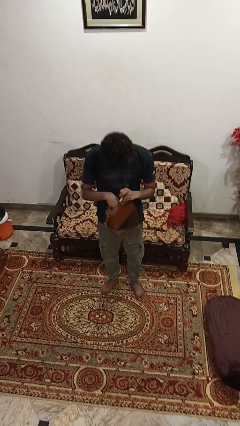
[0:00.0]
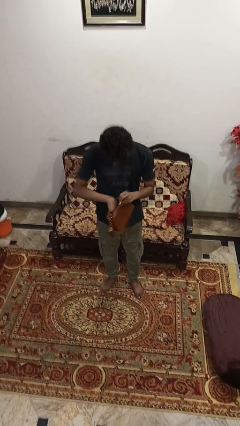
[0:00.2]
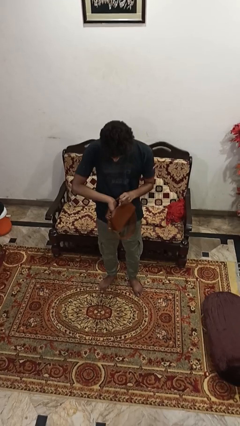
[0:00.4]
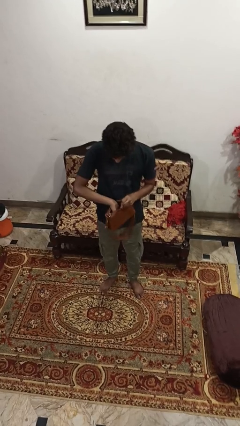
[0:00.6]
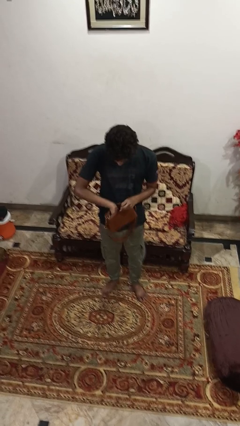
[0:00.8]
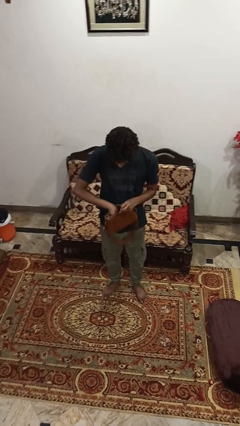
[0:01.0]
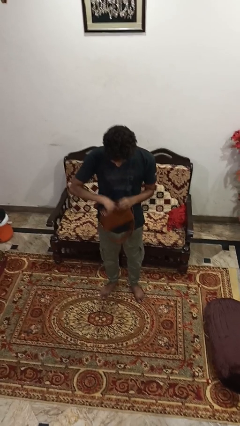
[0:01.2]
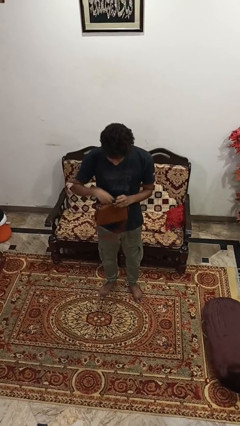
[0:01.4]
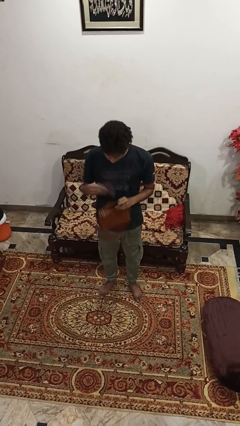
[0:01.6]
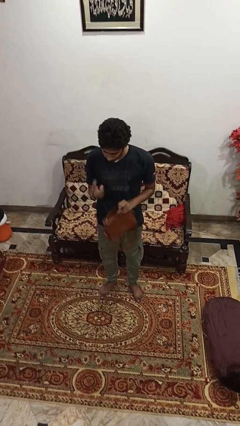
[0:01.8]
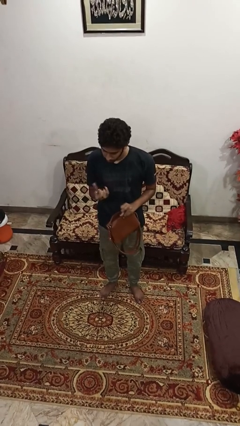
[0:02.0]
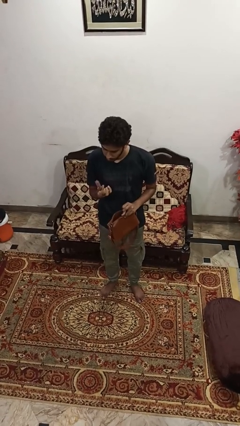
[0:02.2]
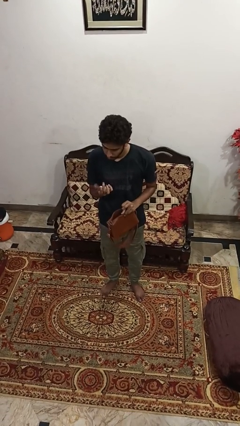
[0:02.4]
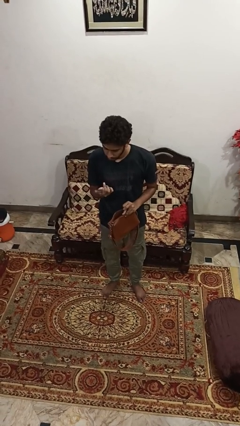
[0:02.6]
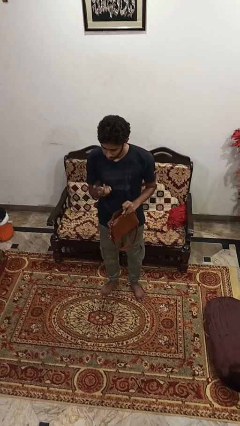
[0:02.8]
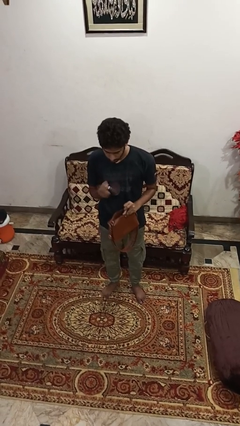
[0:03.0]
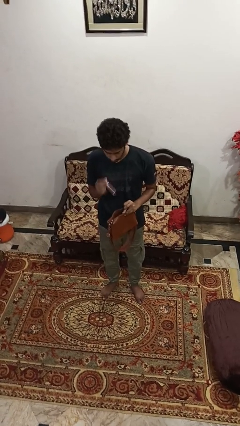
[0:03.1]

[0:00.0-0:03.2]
person takes object from purse

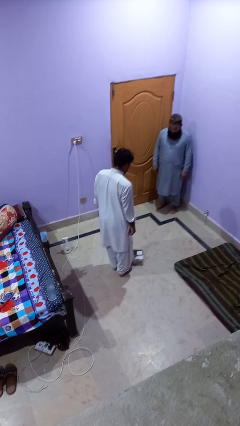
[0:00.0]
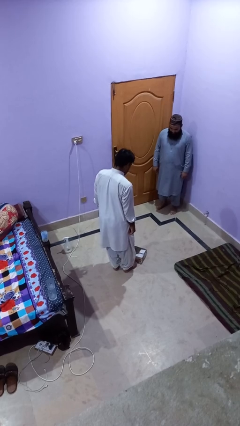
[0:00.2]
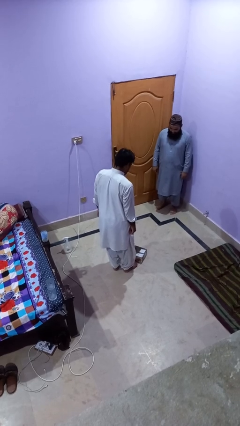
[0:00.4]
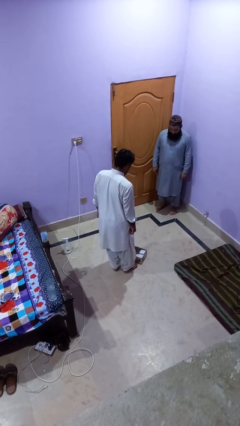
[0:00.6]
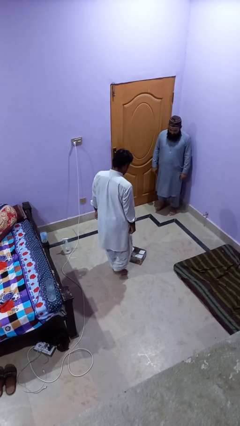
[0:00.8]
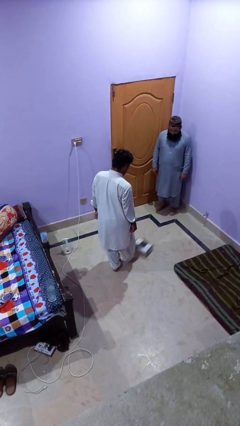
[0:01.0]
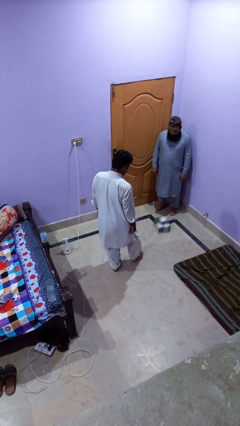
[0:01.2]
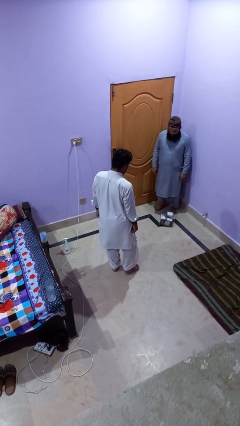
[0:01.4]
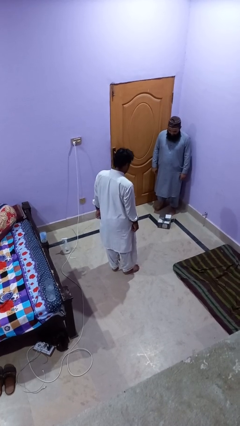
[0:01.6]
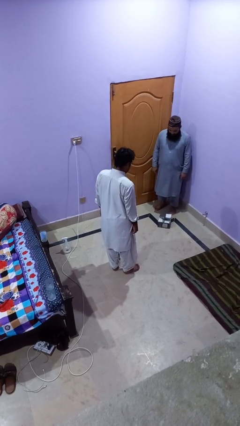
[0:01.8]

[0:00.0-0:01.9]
person kicks object to person

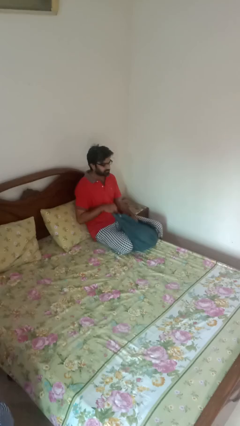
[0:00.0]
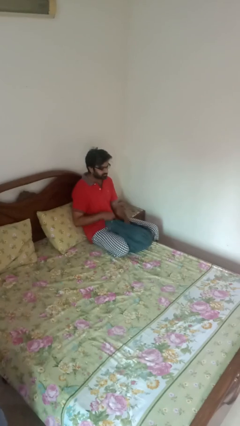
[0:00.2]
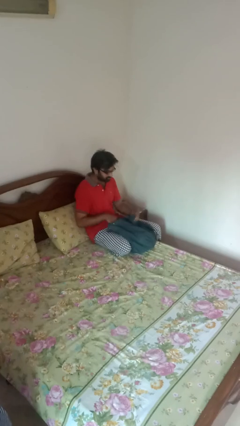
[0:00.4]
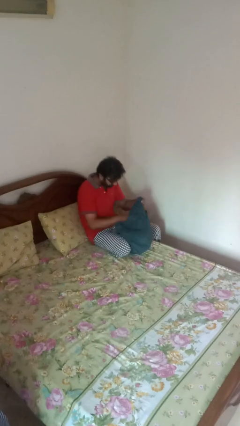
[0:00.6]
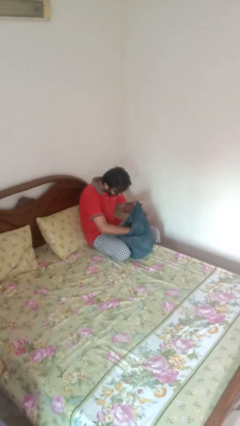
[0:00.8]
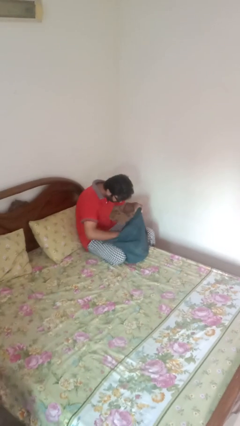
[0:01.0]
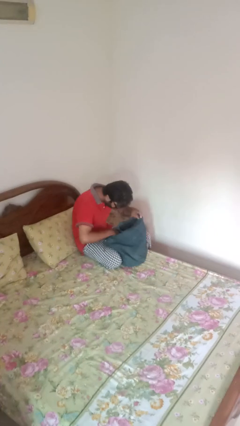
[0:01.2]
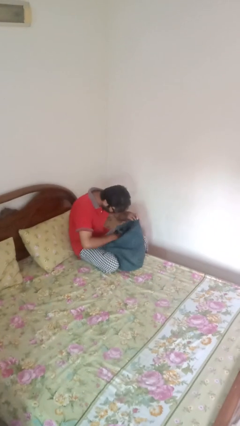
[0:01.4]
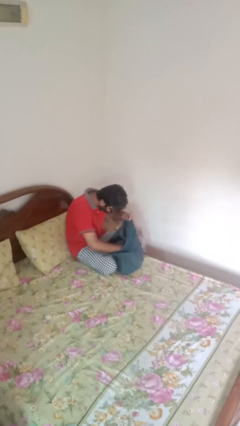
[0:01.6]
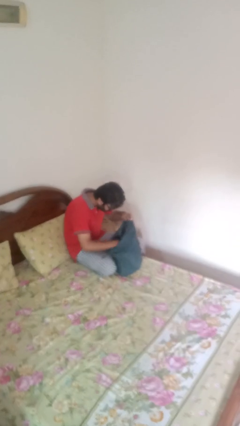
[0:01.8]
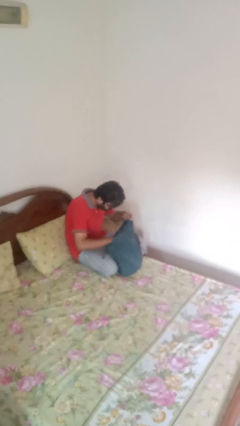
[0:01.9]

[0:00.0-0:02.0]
person searches in bag

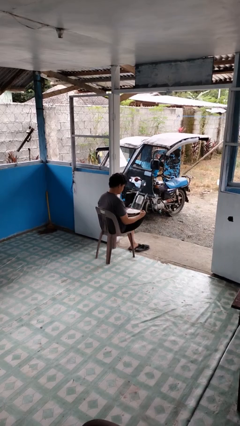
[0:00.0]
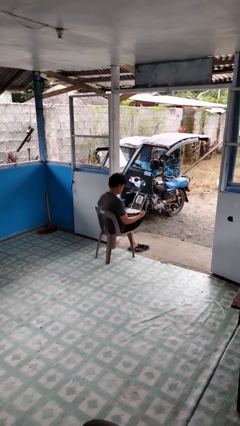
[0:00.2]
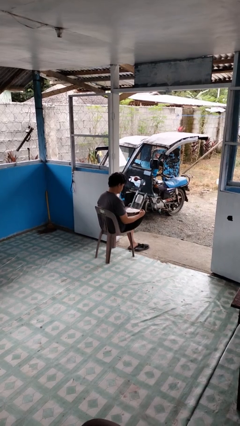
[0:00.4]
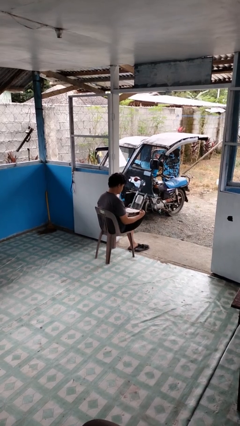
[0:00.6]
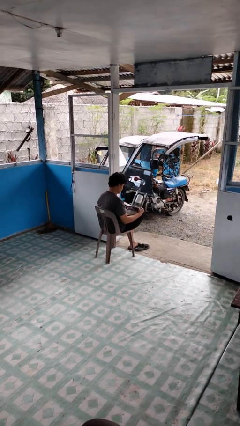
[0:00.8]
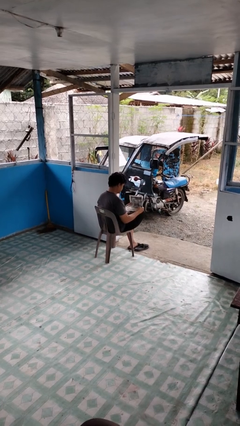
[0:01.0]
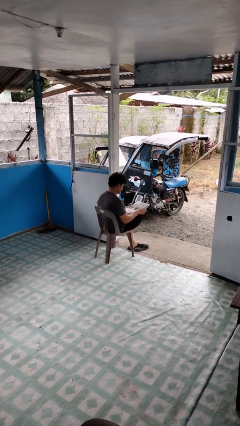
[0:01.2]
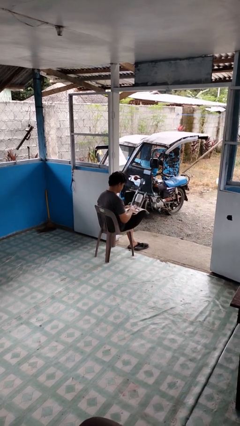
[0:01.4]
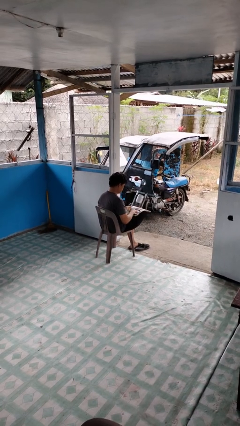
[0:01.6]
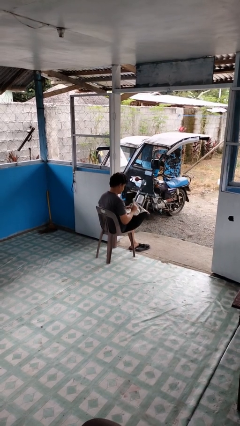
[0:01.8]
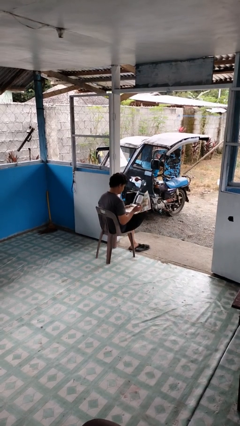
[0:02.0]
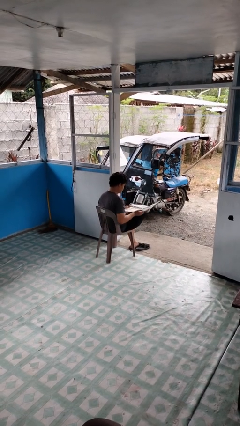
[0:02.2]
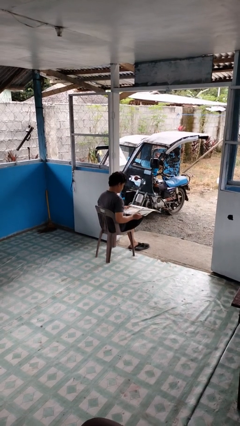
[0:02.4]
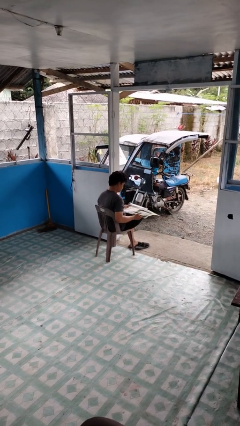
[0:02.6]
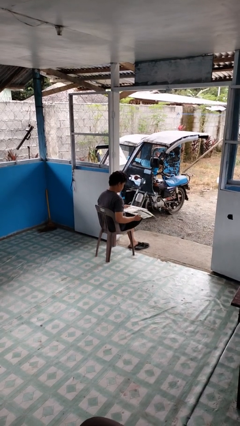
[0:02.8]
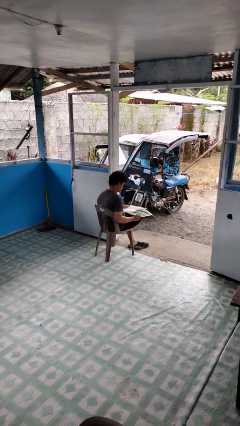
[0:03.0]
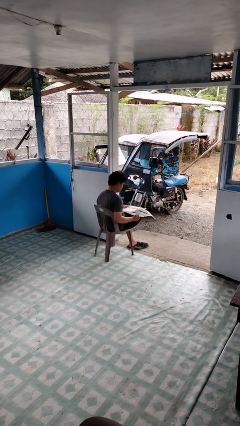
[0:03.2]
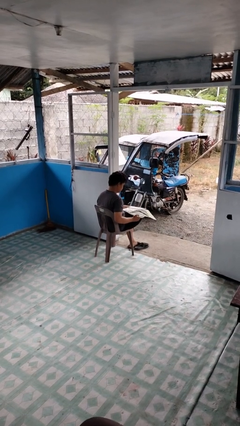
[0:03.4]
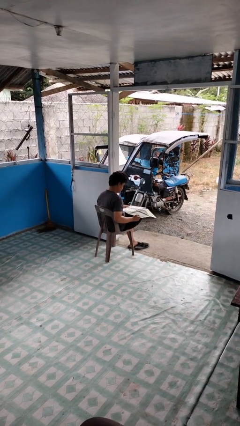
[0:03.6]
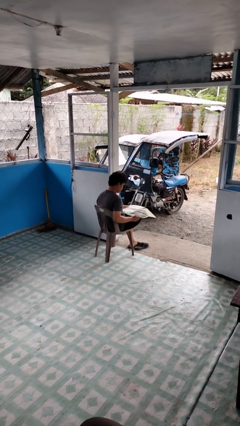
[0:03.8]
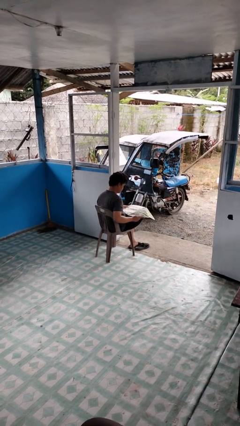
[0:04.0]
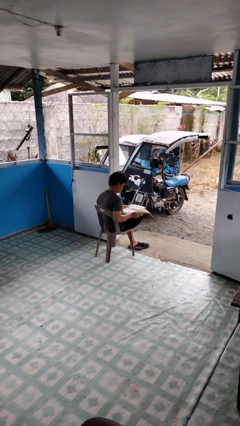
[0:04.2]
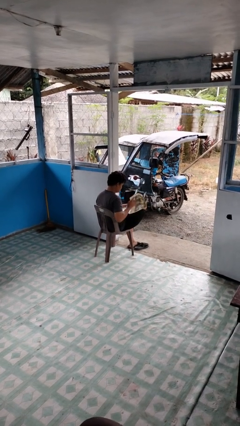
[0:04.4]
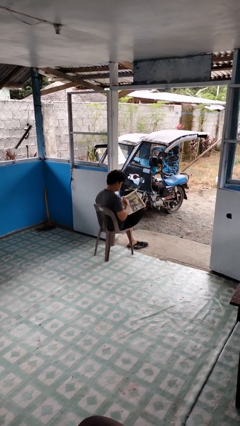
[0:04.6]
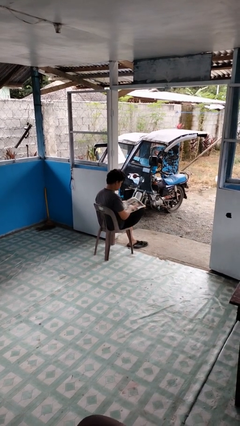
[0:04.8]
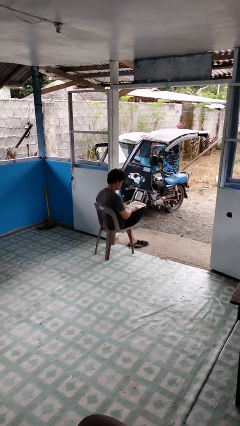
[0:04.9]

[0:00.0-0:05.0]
person reads newspaper

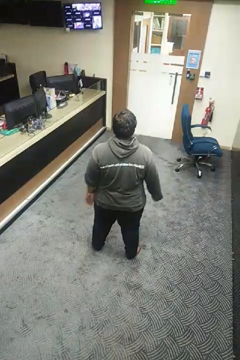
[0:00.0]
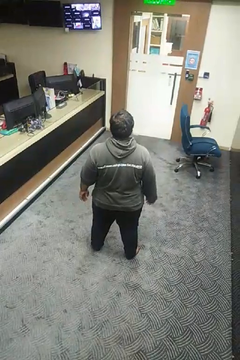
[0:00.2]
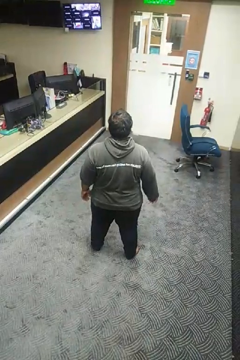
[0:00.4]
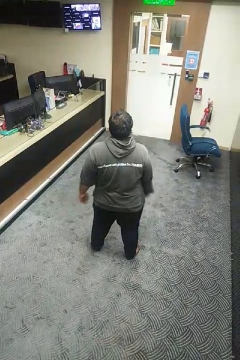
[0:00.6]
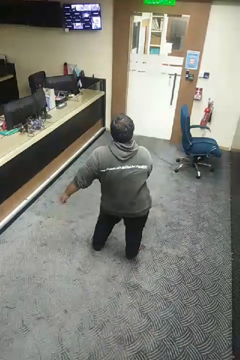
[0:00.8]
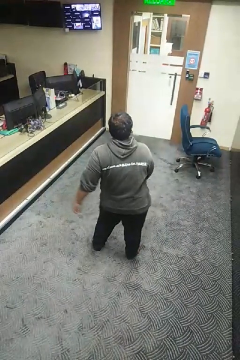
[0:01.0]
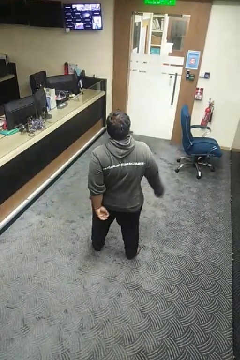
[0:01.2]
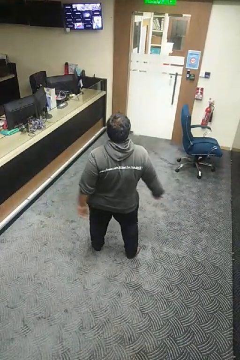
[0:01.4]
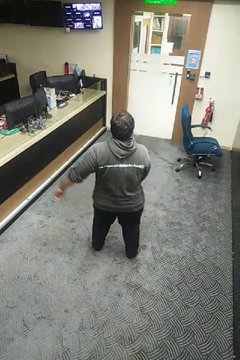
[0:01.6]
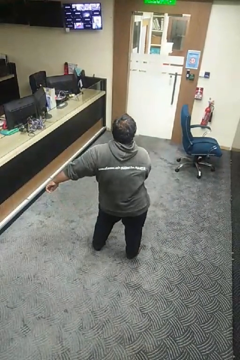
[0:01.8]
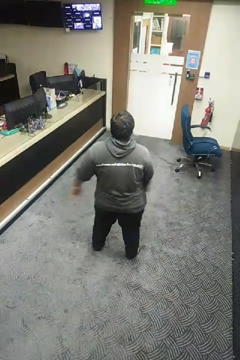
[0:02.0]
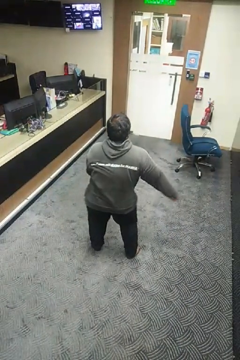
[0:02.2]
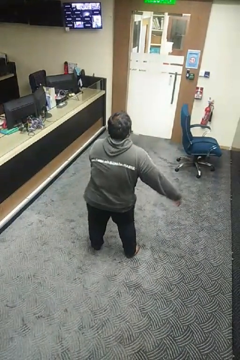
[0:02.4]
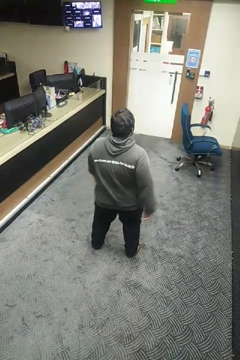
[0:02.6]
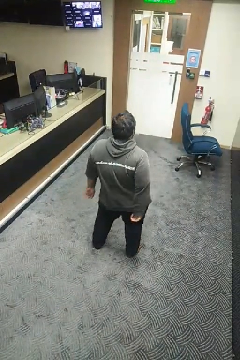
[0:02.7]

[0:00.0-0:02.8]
person dances in place

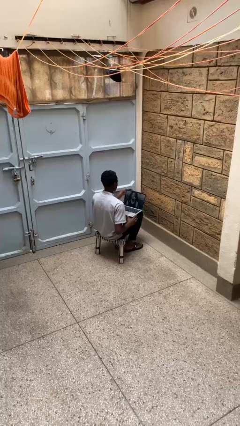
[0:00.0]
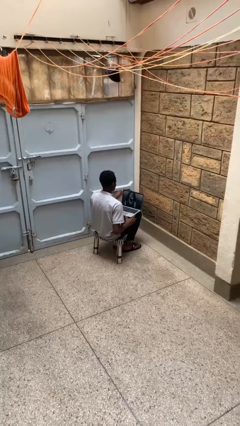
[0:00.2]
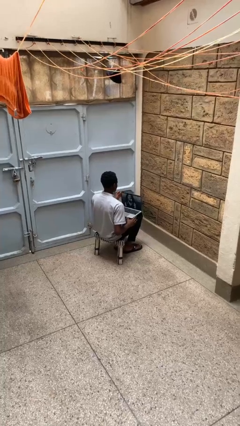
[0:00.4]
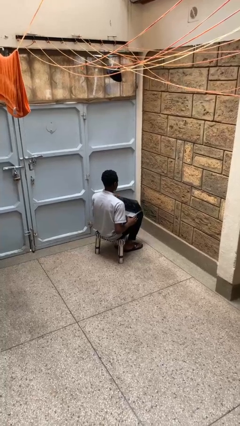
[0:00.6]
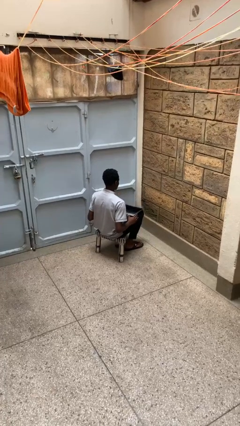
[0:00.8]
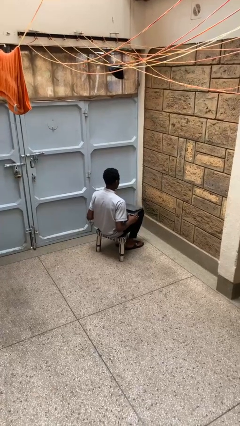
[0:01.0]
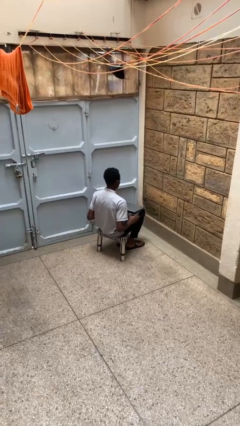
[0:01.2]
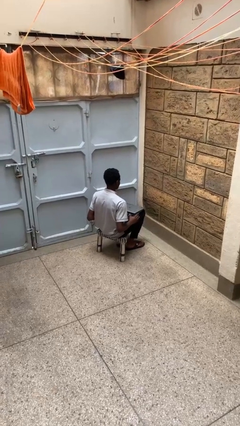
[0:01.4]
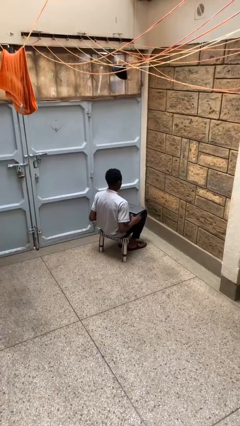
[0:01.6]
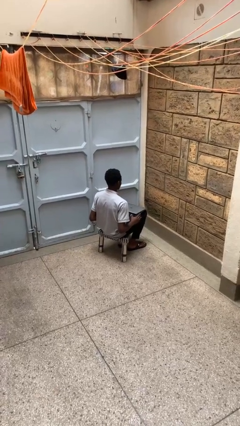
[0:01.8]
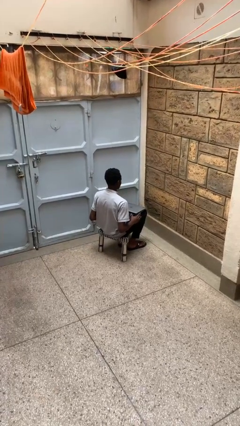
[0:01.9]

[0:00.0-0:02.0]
person closes laptop

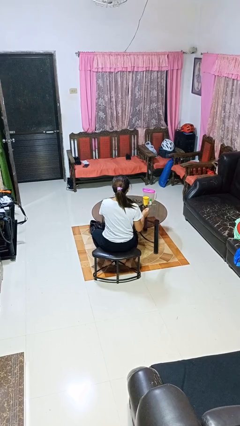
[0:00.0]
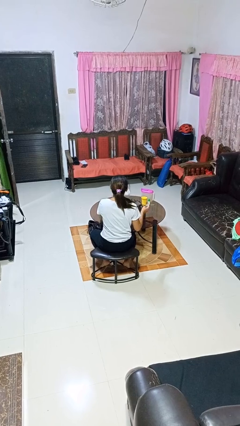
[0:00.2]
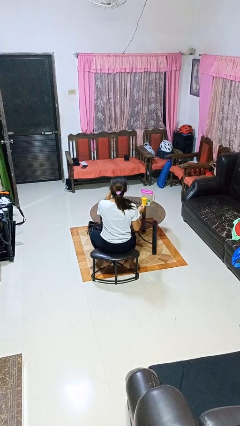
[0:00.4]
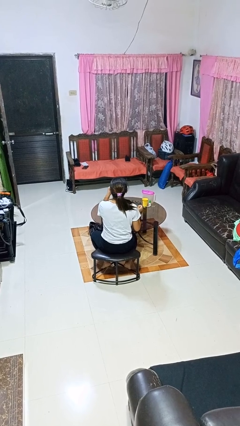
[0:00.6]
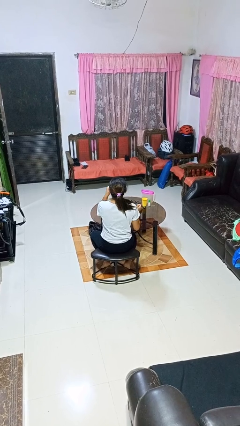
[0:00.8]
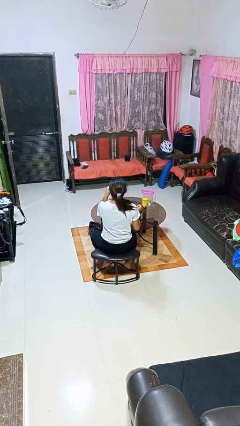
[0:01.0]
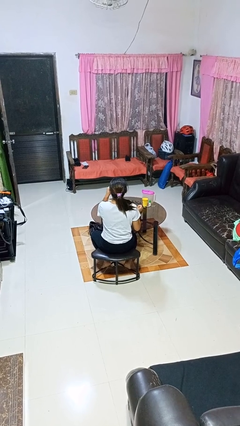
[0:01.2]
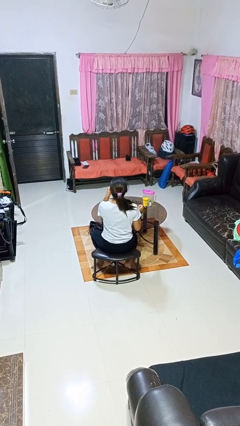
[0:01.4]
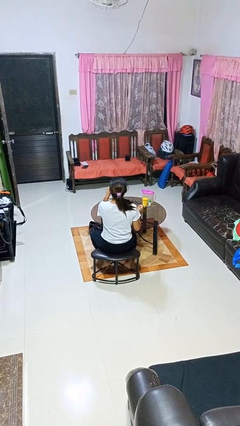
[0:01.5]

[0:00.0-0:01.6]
person drinks from mug
